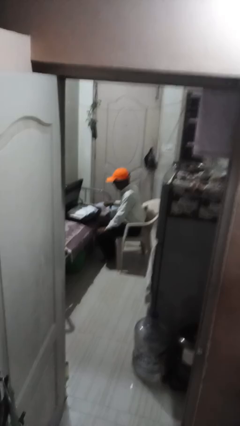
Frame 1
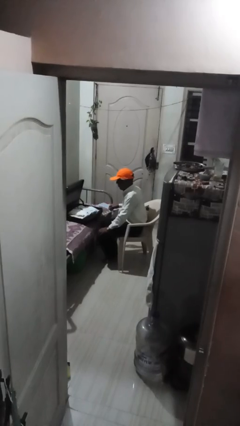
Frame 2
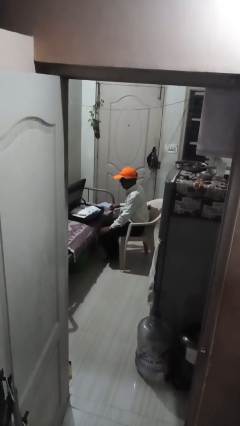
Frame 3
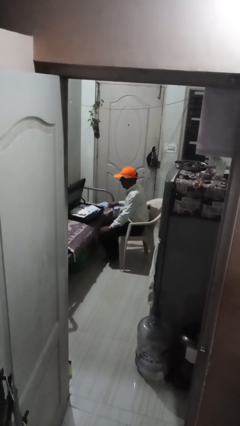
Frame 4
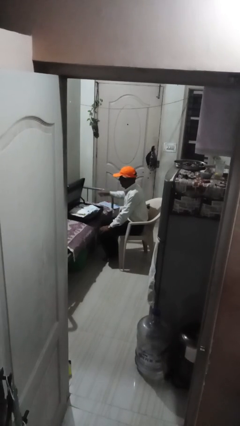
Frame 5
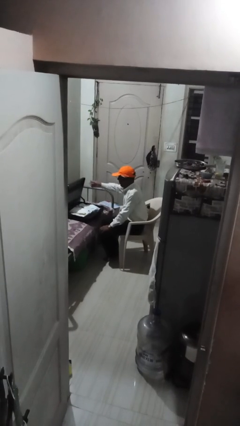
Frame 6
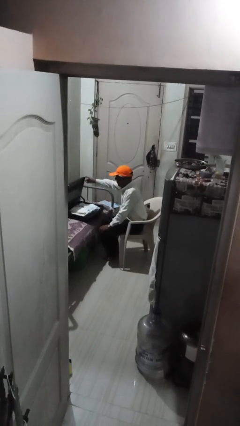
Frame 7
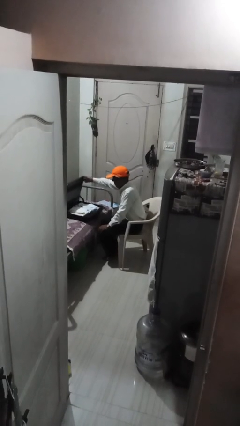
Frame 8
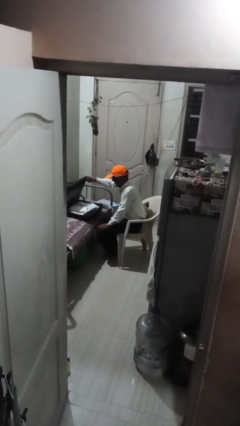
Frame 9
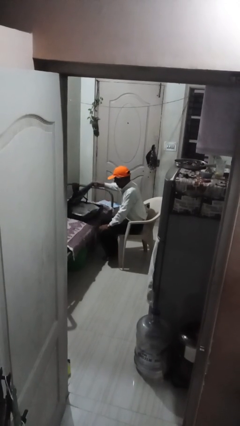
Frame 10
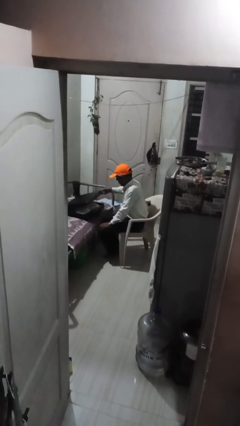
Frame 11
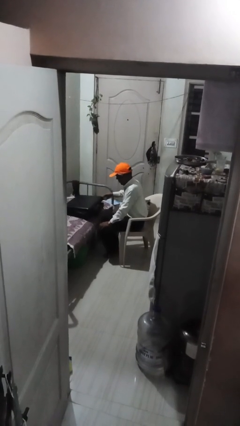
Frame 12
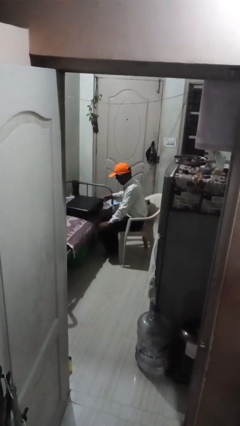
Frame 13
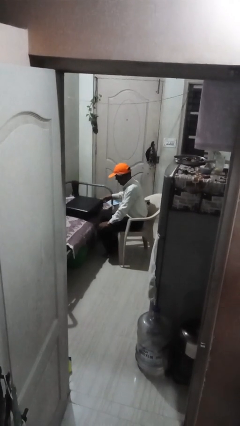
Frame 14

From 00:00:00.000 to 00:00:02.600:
person closes suitcase

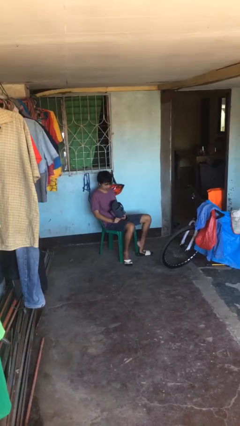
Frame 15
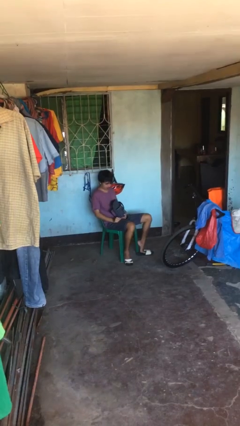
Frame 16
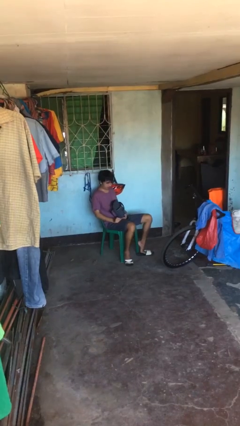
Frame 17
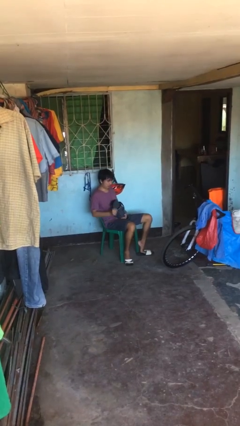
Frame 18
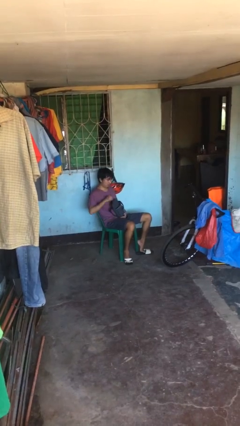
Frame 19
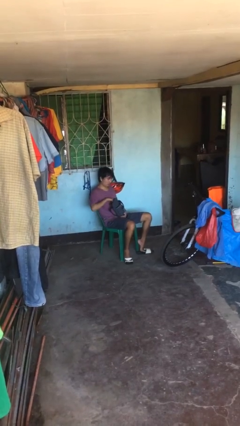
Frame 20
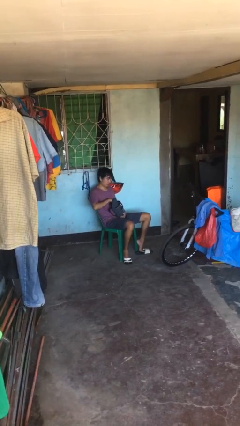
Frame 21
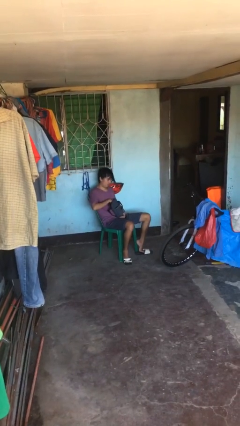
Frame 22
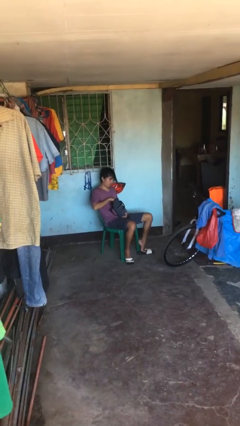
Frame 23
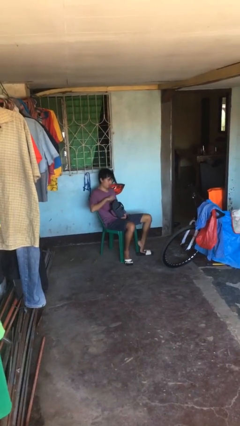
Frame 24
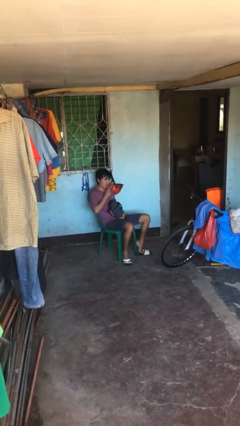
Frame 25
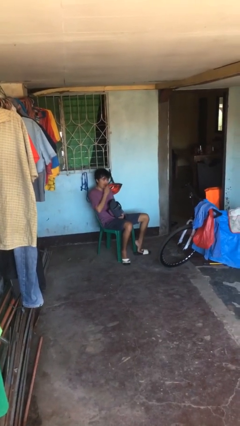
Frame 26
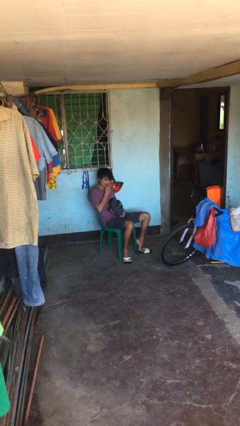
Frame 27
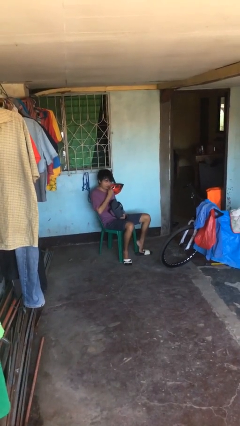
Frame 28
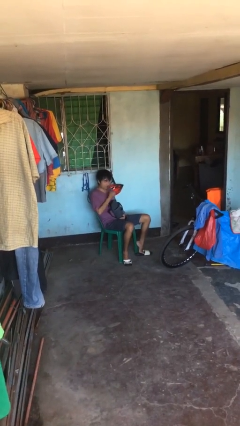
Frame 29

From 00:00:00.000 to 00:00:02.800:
person eats snack from bag

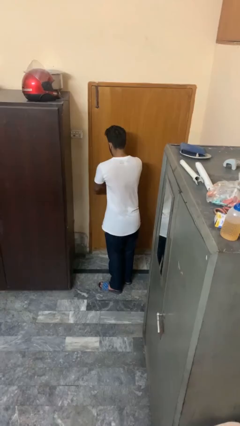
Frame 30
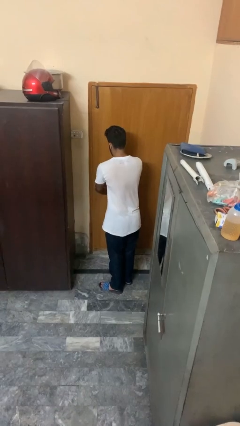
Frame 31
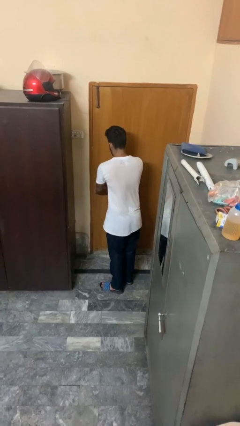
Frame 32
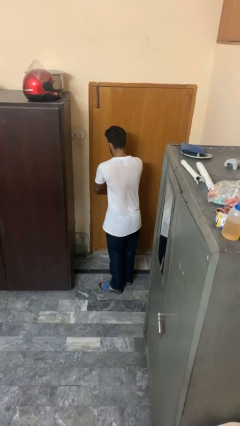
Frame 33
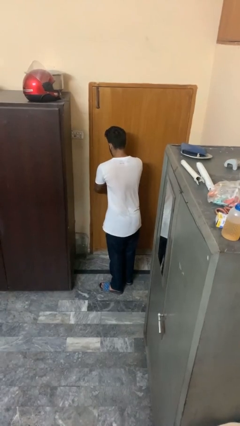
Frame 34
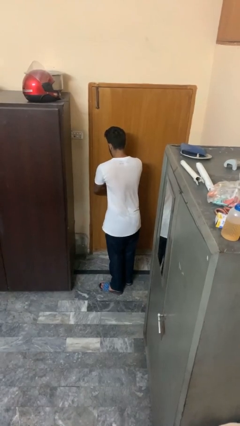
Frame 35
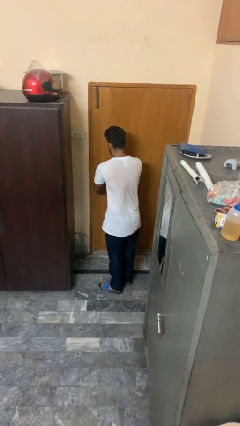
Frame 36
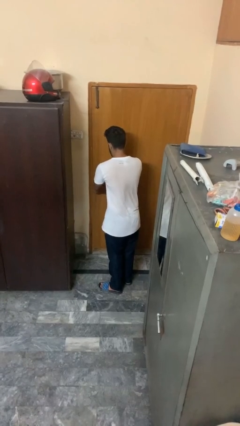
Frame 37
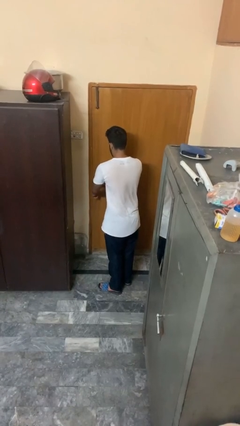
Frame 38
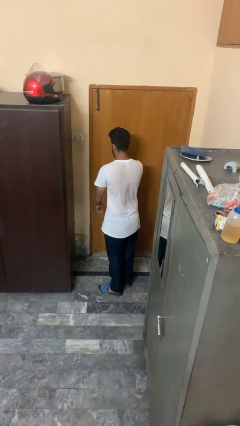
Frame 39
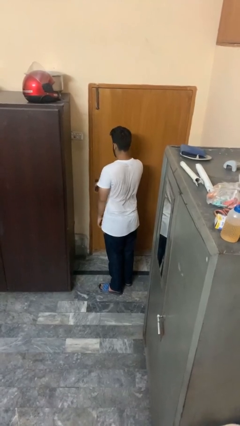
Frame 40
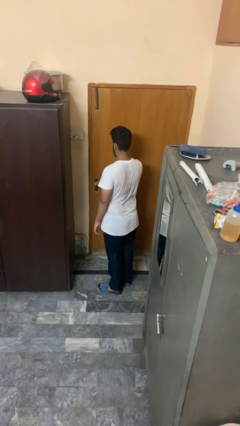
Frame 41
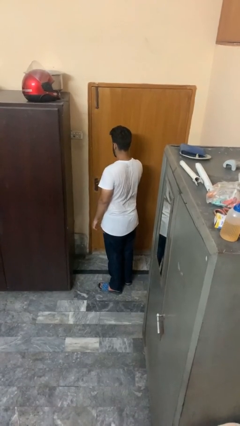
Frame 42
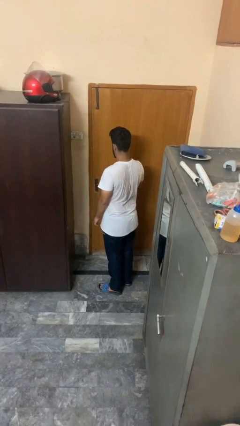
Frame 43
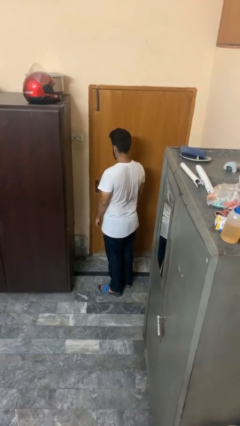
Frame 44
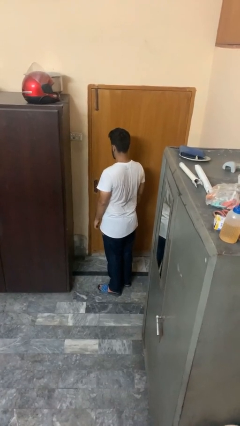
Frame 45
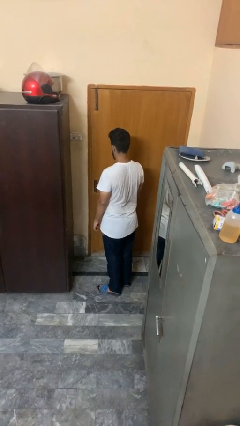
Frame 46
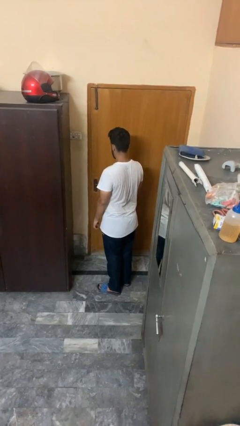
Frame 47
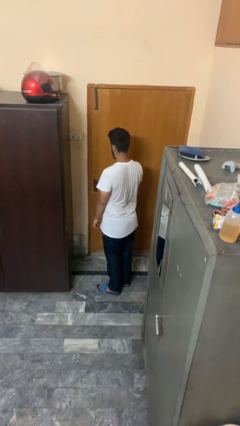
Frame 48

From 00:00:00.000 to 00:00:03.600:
person locks door with keys

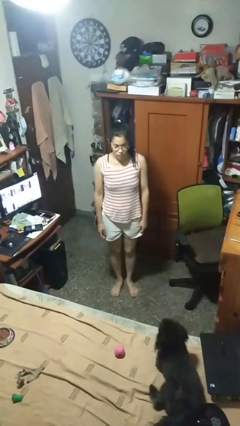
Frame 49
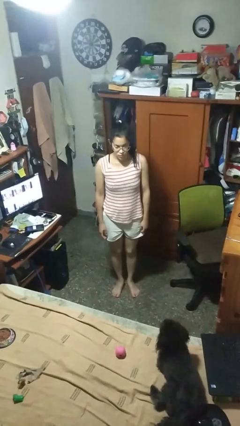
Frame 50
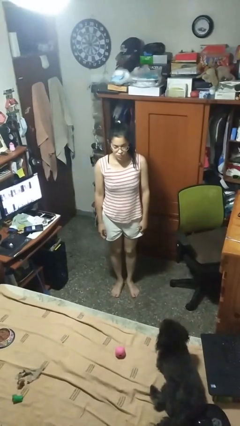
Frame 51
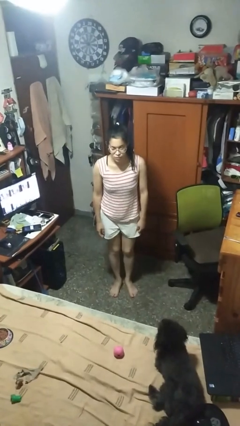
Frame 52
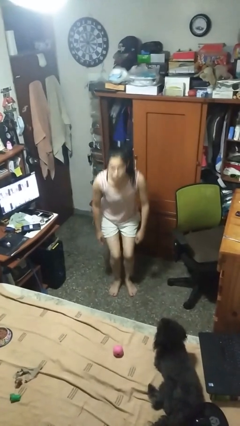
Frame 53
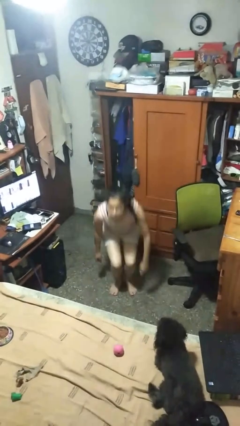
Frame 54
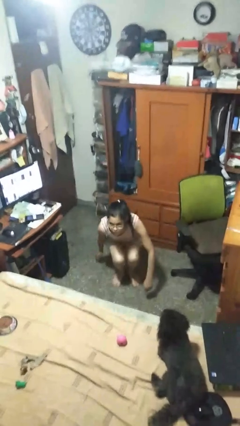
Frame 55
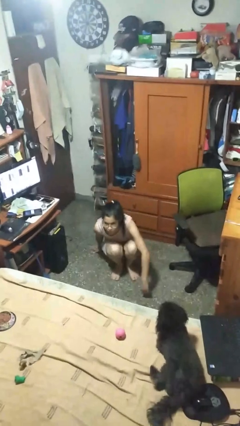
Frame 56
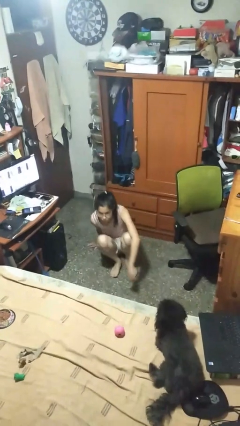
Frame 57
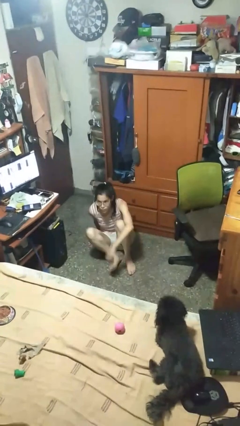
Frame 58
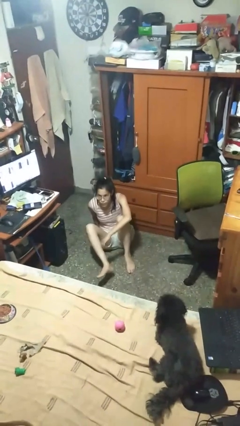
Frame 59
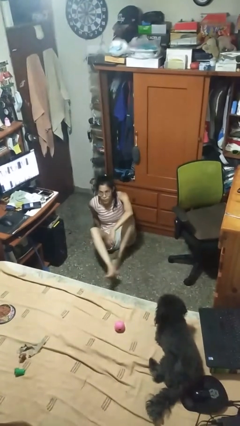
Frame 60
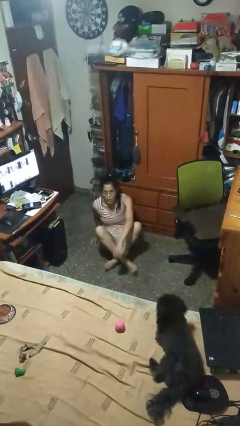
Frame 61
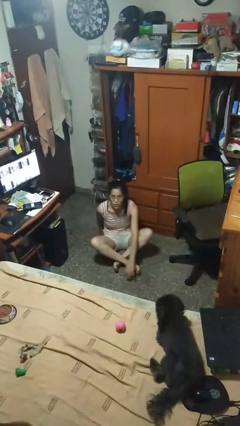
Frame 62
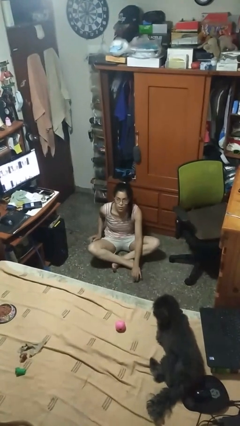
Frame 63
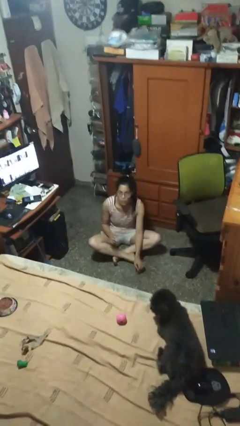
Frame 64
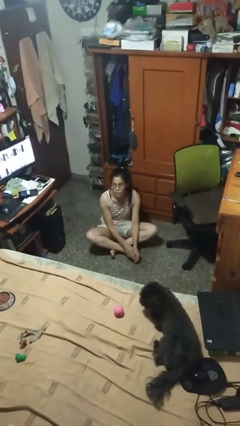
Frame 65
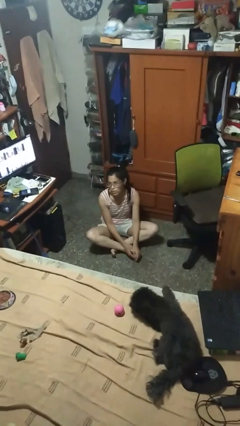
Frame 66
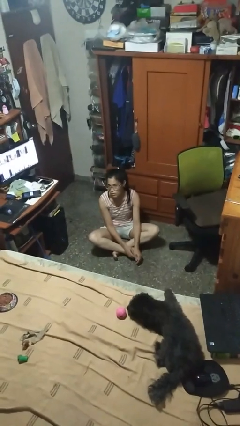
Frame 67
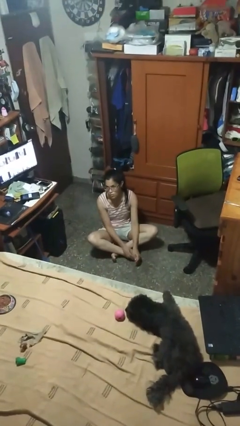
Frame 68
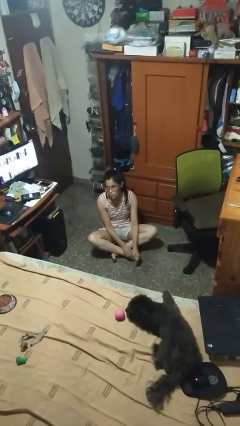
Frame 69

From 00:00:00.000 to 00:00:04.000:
person sits crisscross

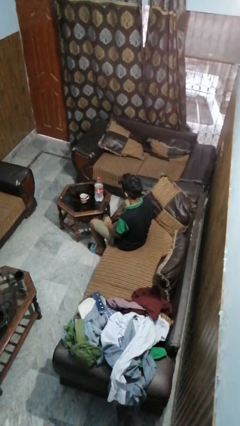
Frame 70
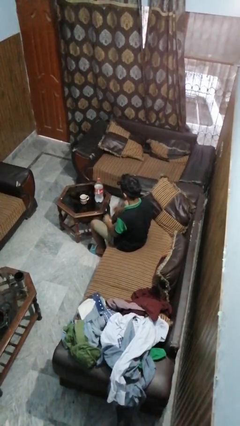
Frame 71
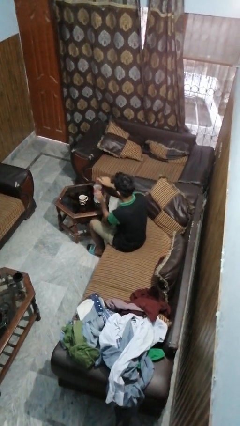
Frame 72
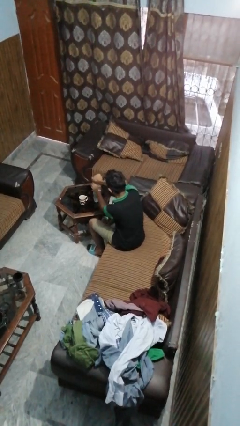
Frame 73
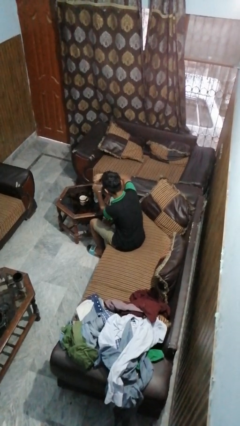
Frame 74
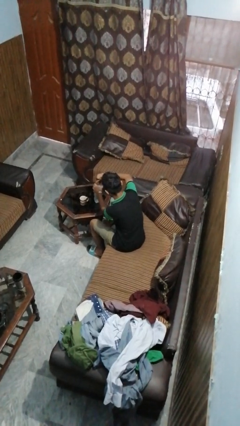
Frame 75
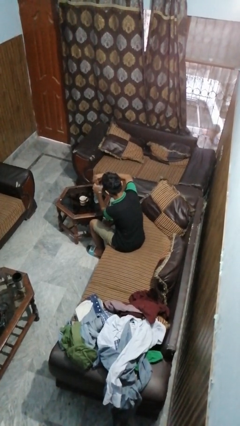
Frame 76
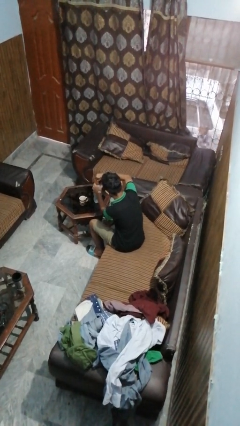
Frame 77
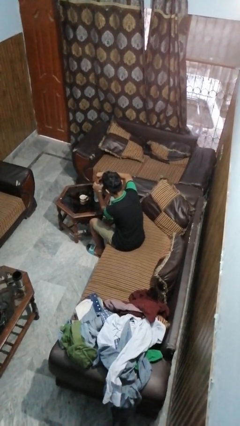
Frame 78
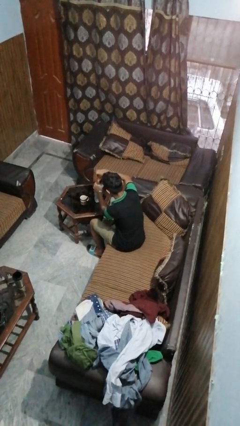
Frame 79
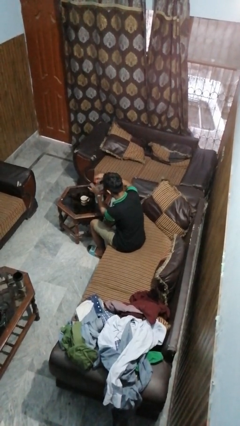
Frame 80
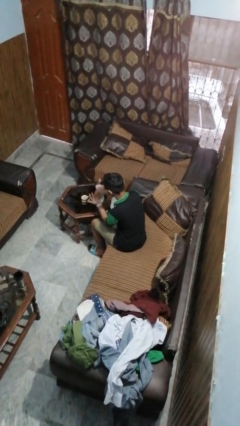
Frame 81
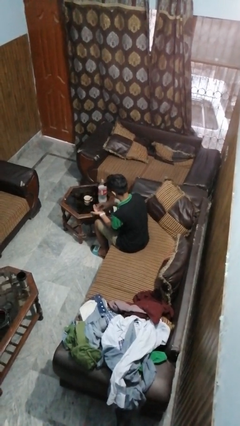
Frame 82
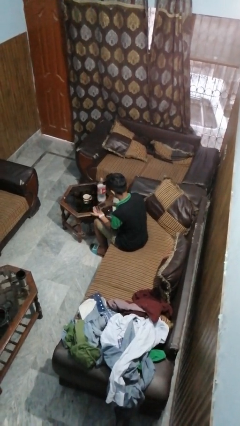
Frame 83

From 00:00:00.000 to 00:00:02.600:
person unscrews lid from bottle

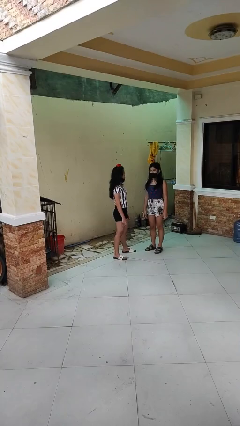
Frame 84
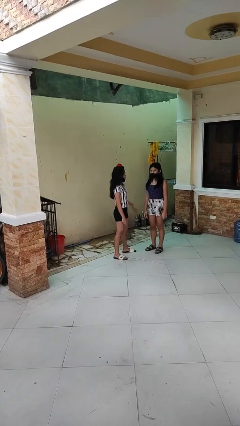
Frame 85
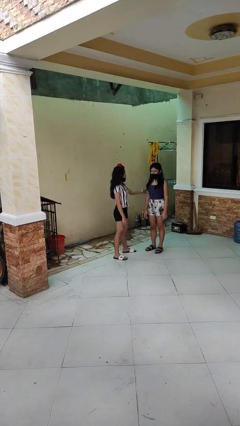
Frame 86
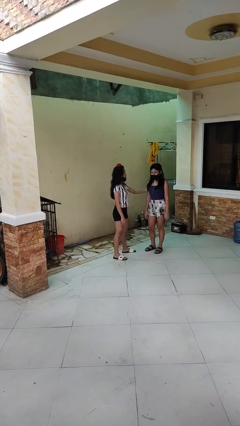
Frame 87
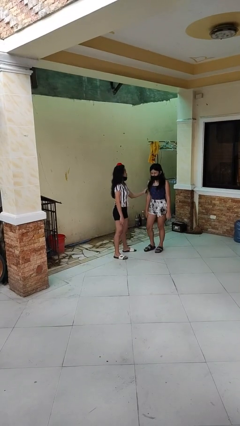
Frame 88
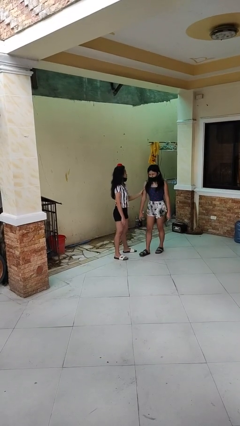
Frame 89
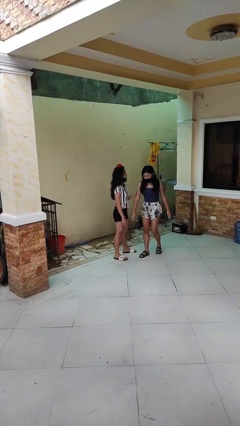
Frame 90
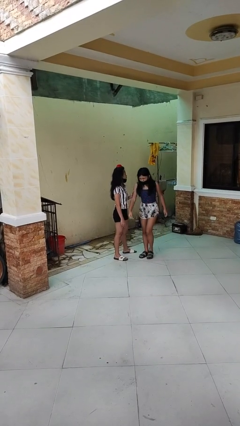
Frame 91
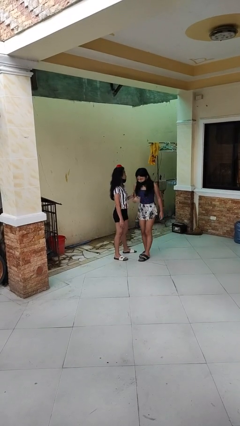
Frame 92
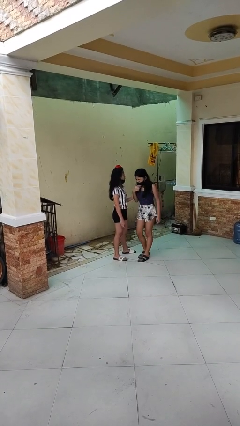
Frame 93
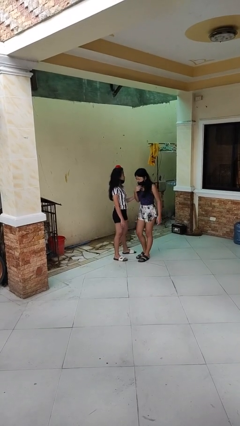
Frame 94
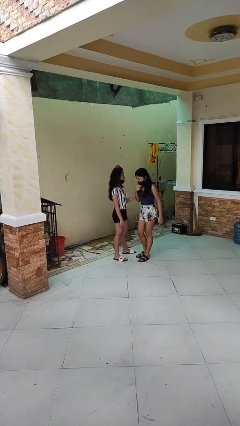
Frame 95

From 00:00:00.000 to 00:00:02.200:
person grabs person by bicep
